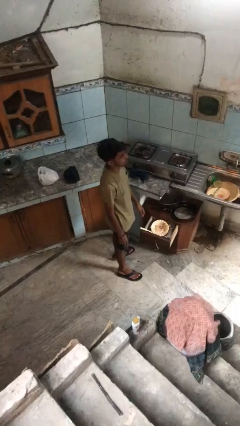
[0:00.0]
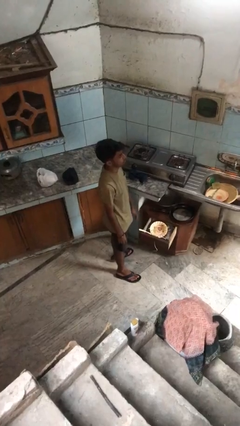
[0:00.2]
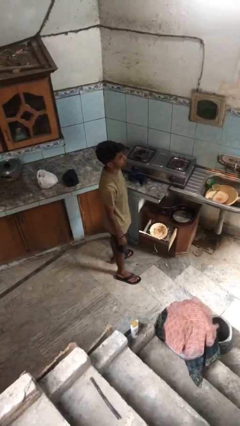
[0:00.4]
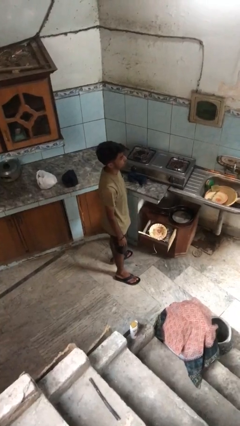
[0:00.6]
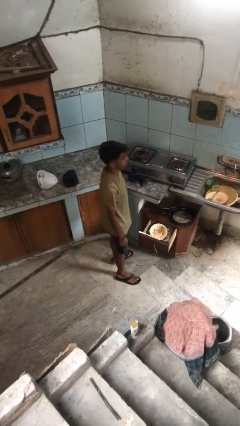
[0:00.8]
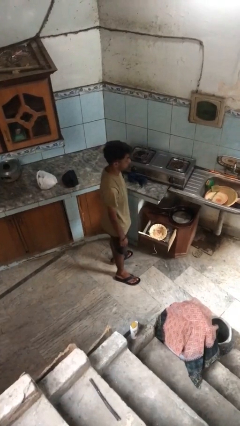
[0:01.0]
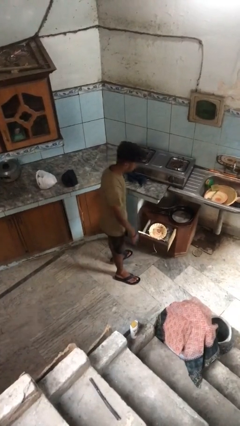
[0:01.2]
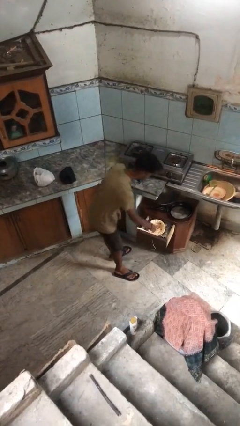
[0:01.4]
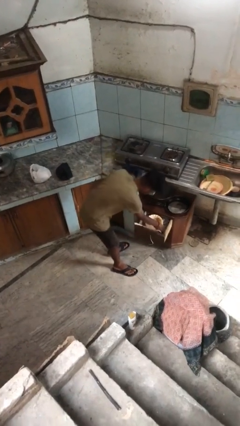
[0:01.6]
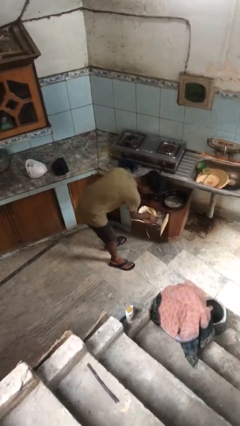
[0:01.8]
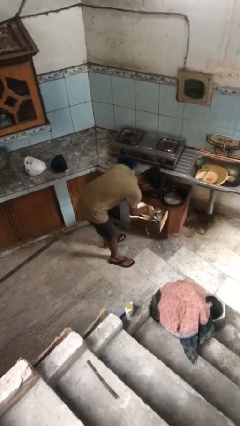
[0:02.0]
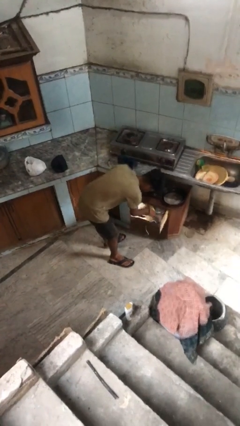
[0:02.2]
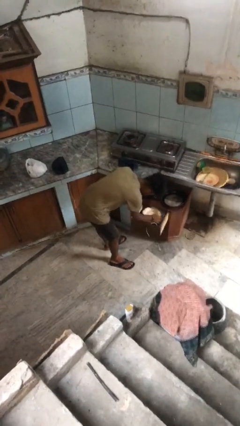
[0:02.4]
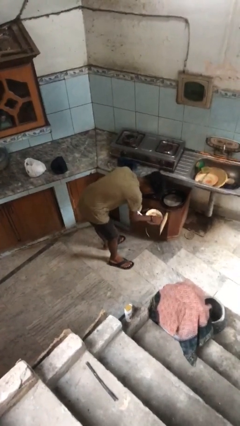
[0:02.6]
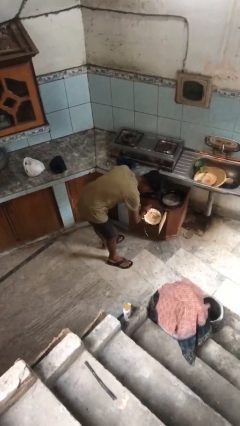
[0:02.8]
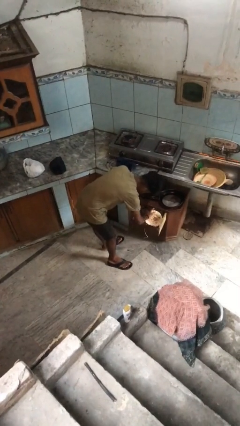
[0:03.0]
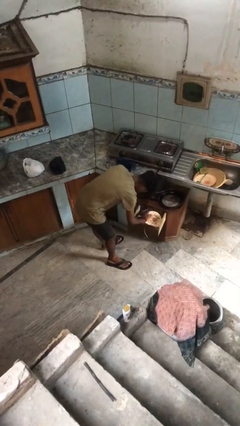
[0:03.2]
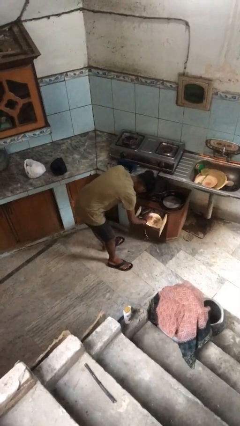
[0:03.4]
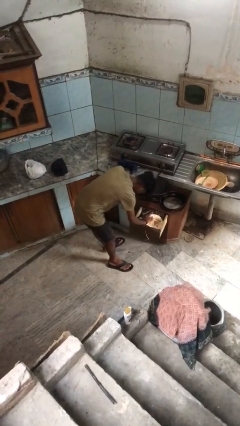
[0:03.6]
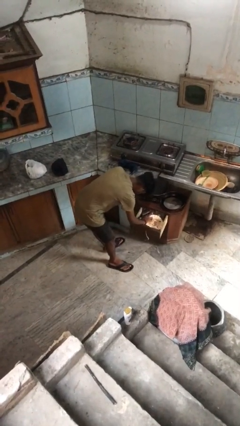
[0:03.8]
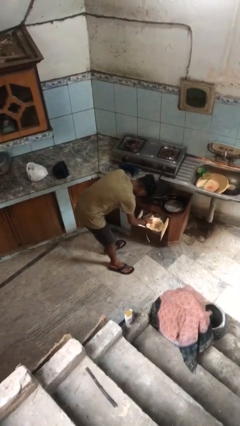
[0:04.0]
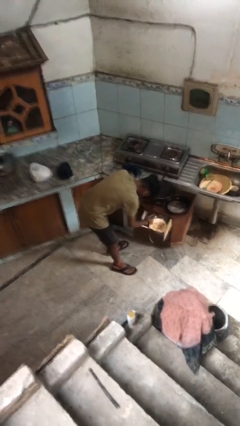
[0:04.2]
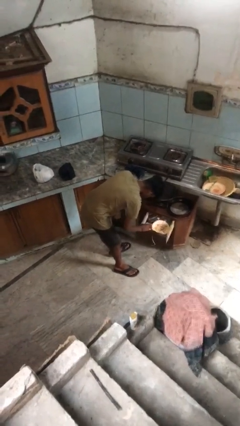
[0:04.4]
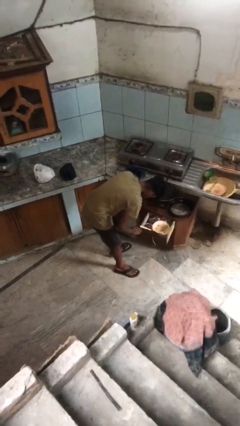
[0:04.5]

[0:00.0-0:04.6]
person searches in kitchen drawer

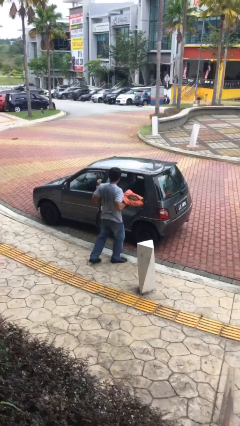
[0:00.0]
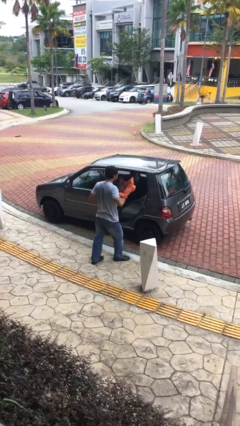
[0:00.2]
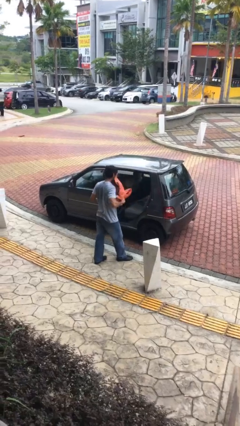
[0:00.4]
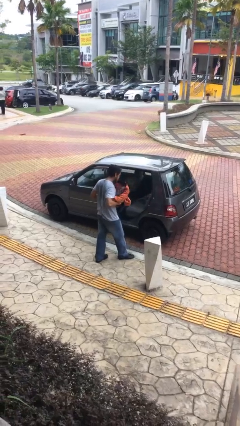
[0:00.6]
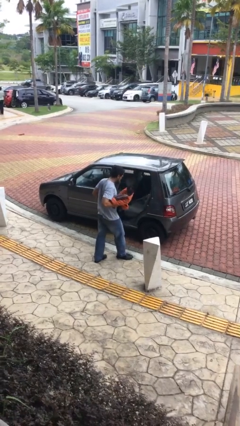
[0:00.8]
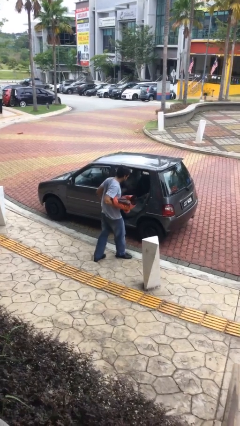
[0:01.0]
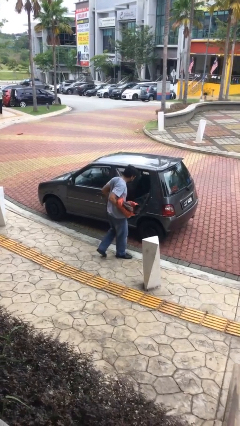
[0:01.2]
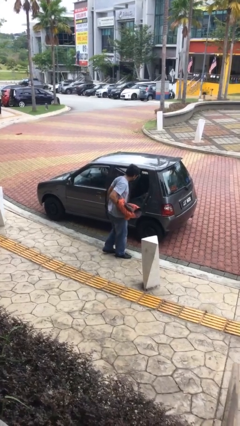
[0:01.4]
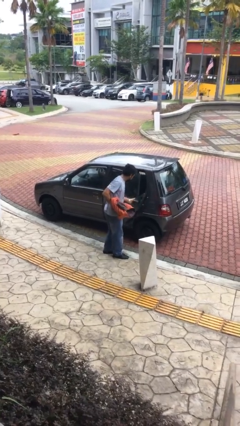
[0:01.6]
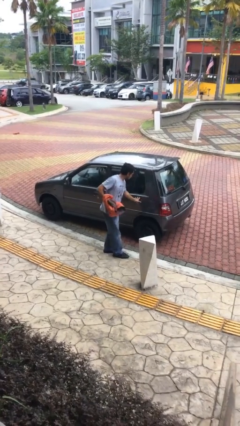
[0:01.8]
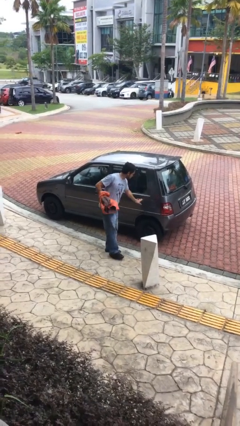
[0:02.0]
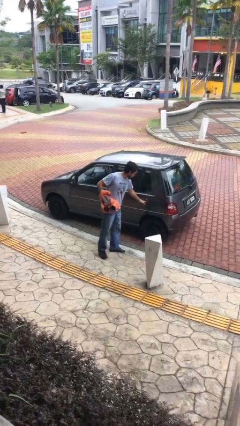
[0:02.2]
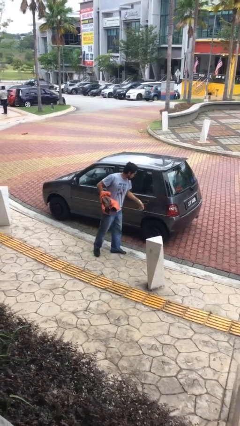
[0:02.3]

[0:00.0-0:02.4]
person closes car door

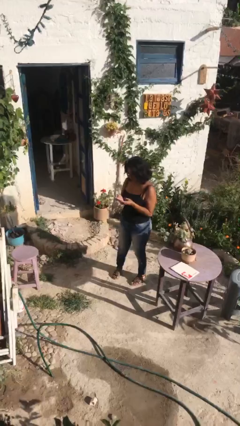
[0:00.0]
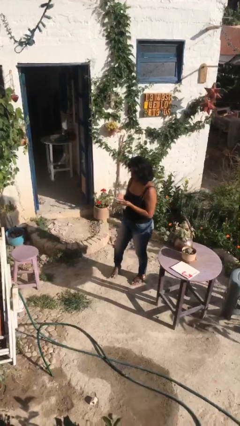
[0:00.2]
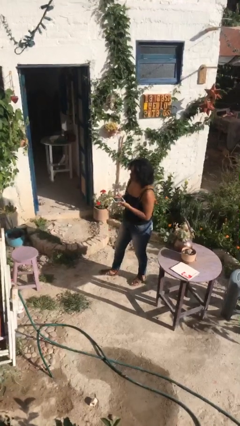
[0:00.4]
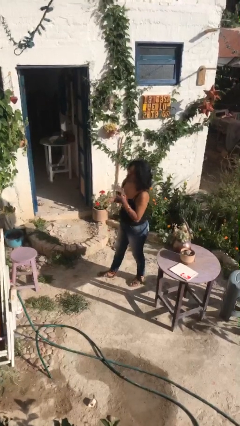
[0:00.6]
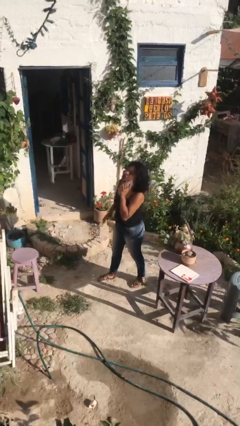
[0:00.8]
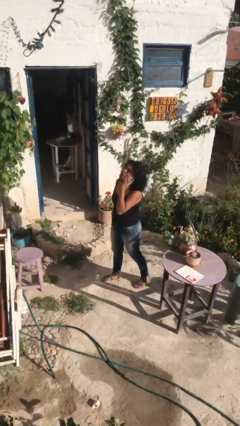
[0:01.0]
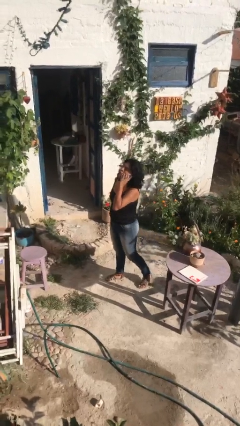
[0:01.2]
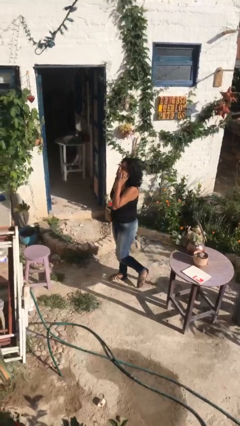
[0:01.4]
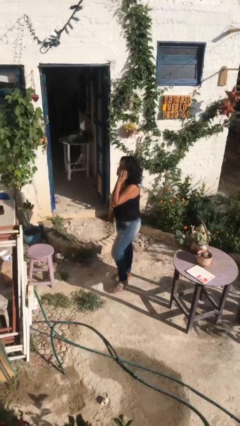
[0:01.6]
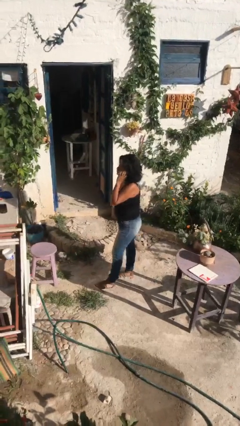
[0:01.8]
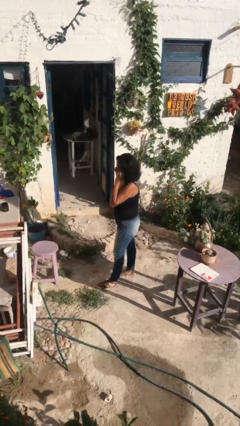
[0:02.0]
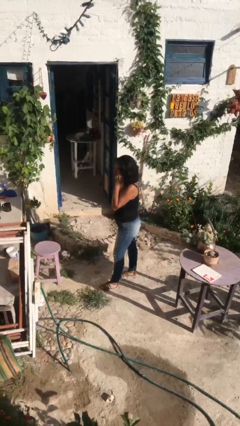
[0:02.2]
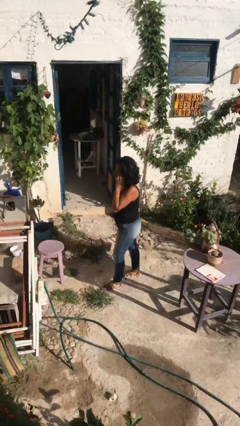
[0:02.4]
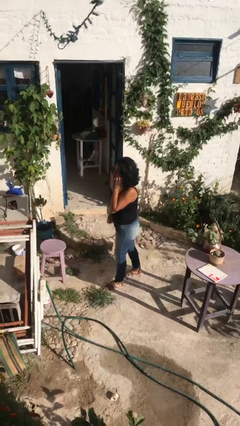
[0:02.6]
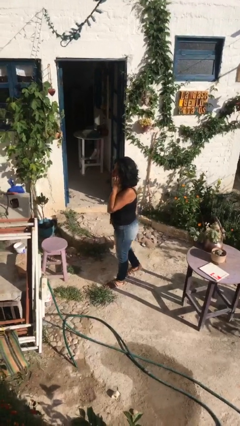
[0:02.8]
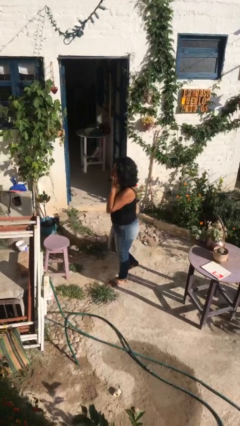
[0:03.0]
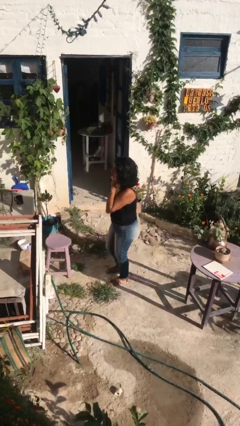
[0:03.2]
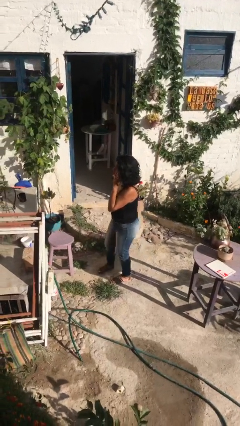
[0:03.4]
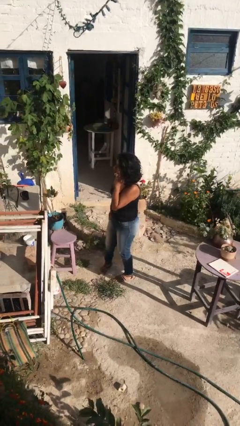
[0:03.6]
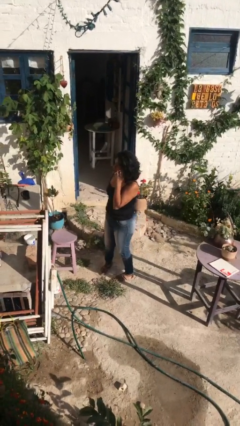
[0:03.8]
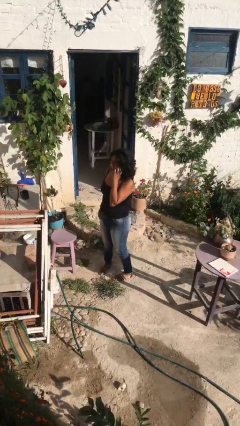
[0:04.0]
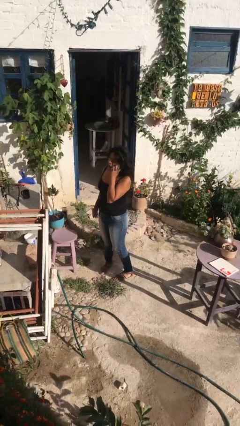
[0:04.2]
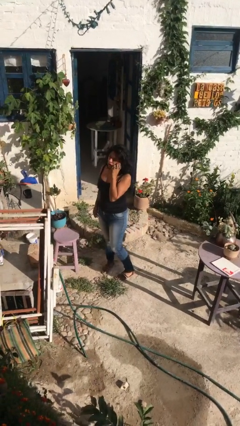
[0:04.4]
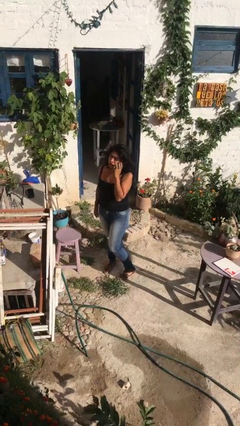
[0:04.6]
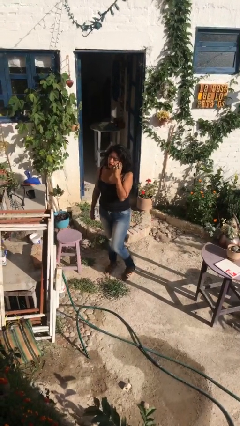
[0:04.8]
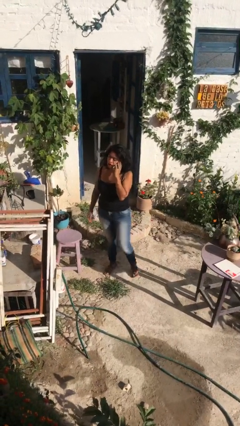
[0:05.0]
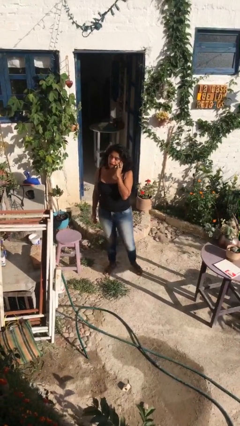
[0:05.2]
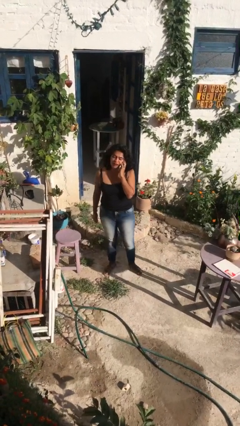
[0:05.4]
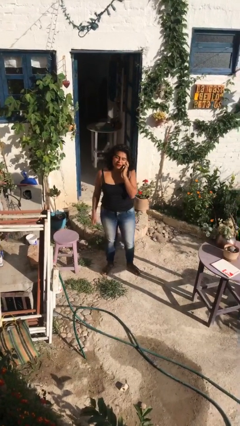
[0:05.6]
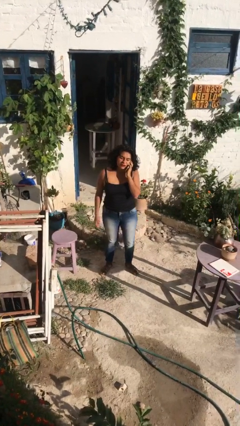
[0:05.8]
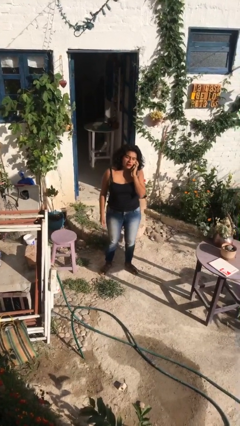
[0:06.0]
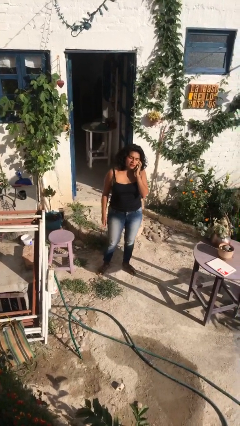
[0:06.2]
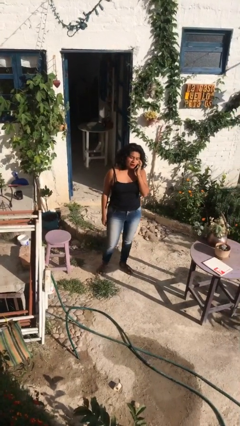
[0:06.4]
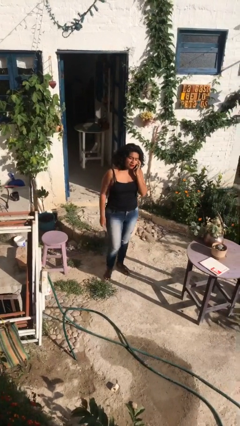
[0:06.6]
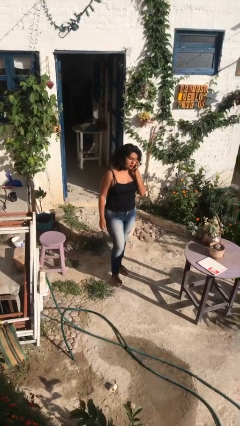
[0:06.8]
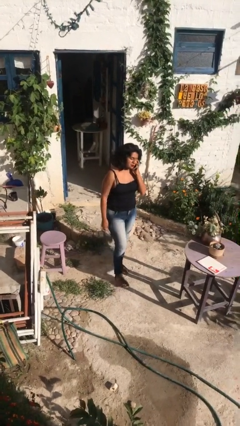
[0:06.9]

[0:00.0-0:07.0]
person talks on phone

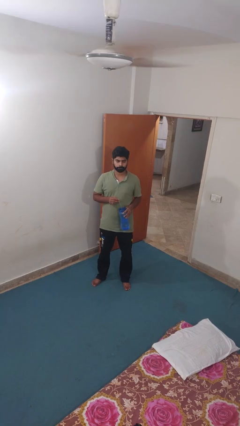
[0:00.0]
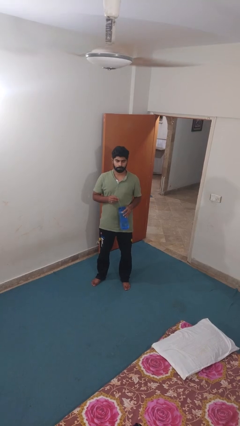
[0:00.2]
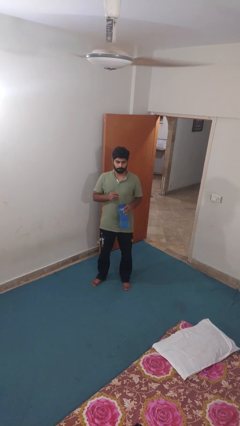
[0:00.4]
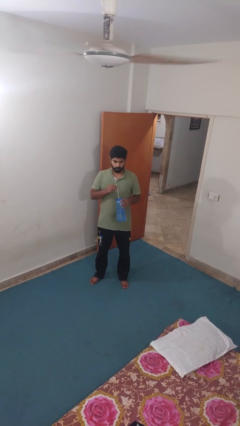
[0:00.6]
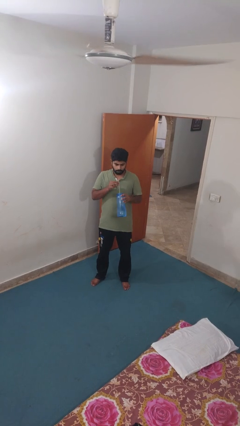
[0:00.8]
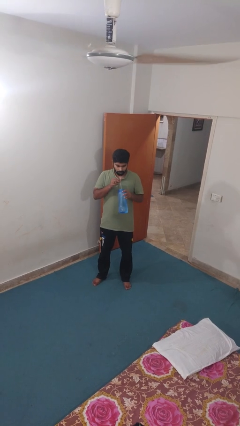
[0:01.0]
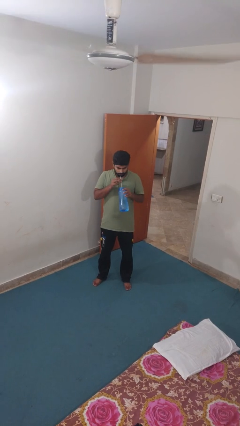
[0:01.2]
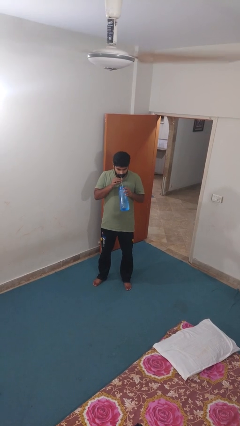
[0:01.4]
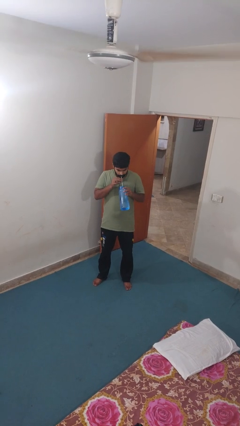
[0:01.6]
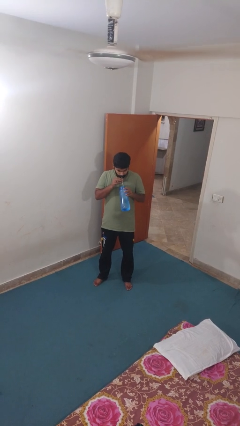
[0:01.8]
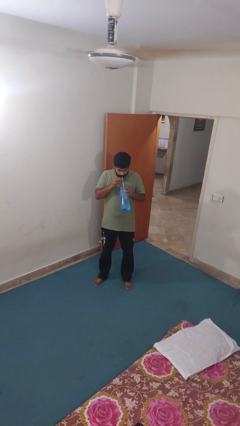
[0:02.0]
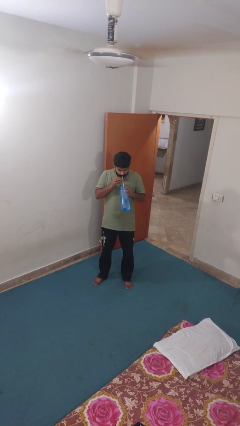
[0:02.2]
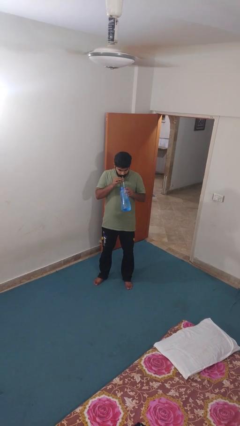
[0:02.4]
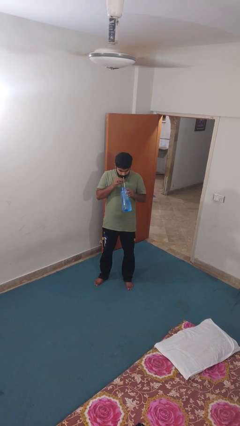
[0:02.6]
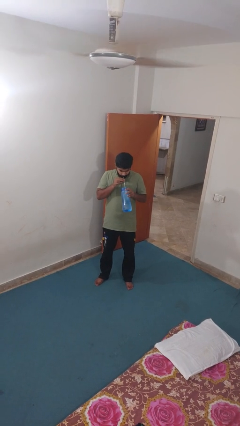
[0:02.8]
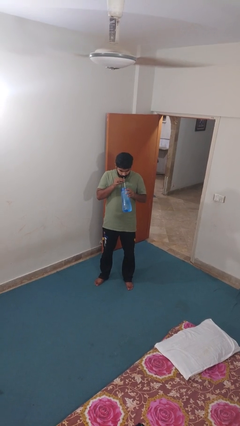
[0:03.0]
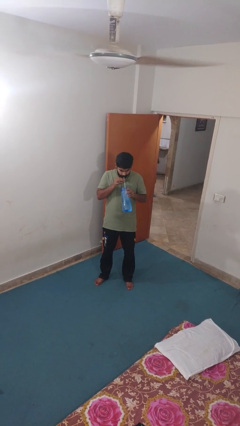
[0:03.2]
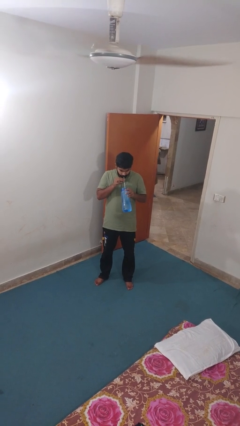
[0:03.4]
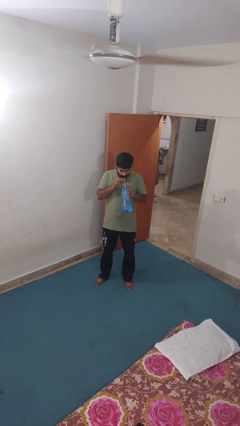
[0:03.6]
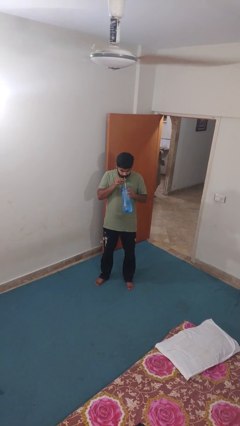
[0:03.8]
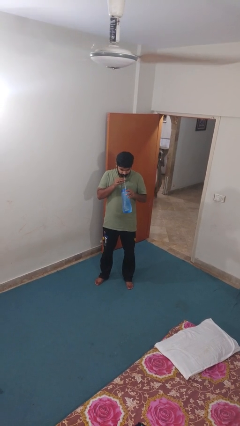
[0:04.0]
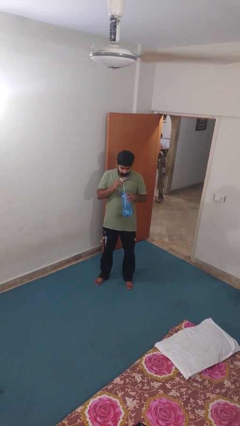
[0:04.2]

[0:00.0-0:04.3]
person drinks from straw
